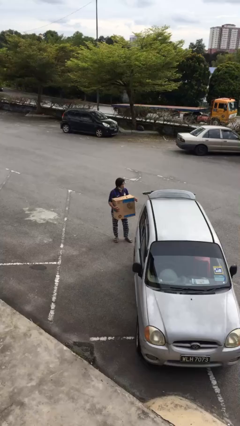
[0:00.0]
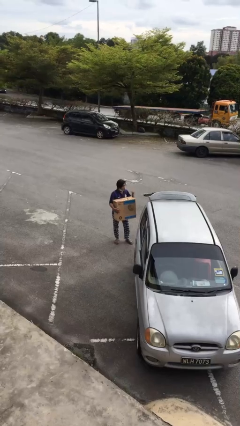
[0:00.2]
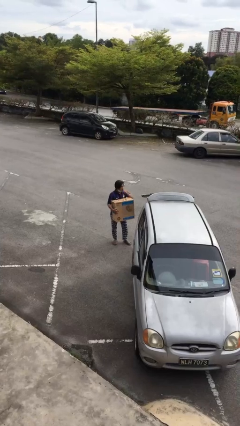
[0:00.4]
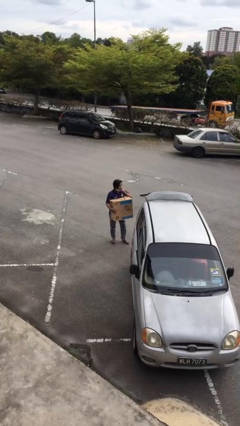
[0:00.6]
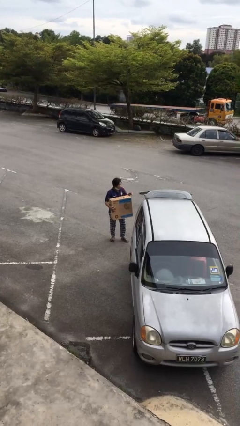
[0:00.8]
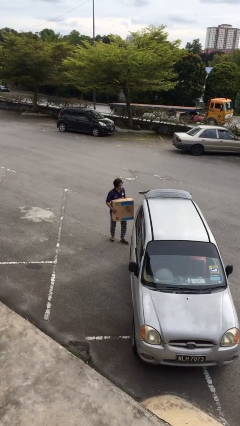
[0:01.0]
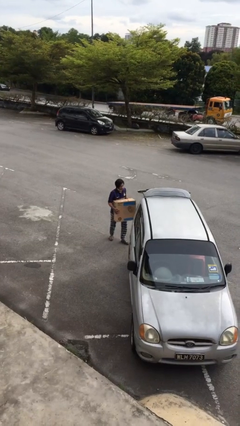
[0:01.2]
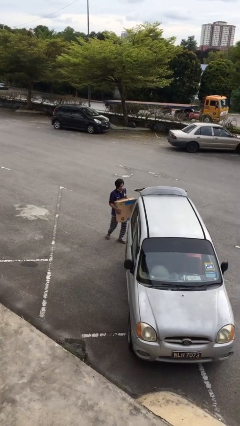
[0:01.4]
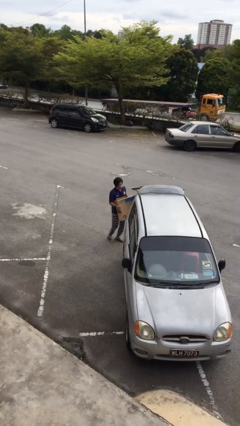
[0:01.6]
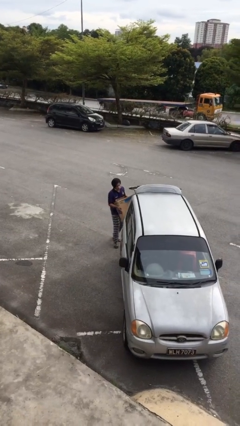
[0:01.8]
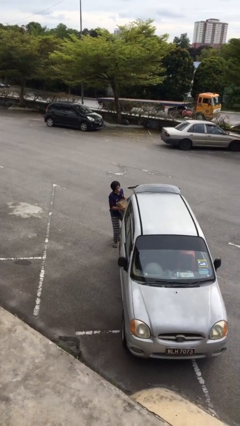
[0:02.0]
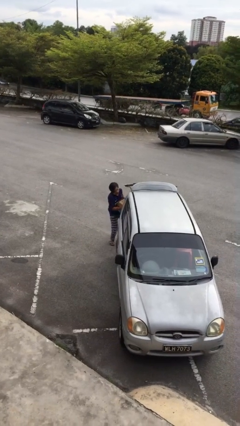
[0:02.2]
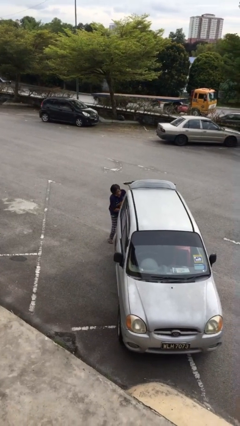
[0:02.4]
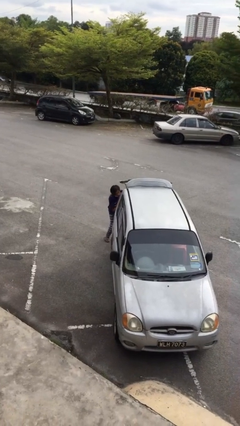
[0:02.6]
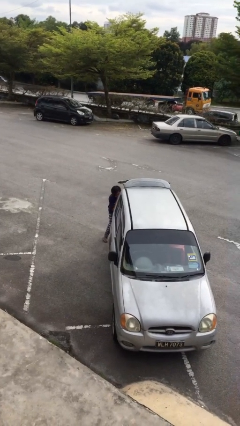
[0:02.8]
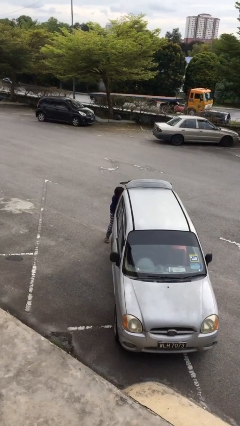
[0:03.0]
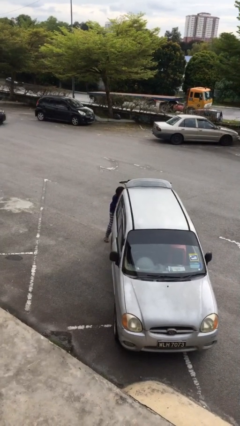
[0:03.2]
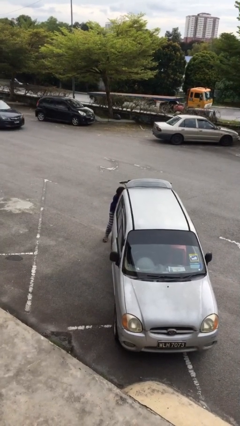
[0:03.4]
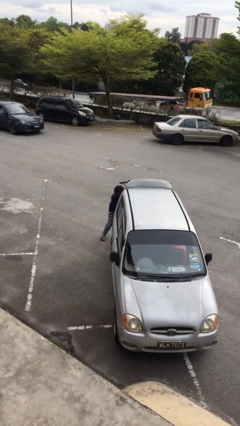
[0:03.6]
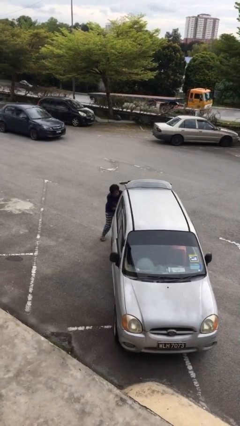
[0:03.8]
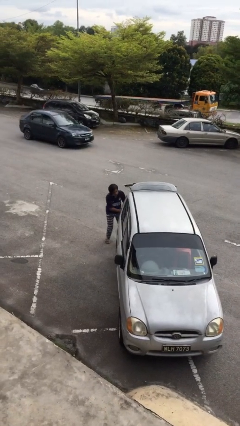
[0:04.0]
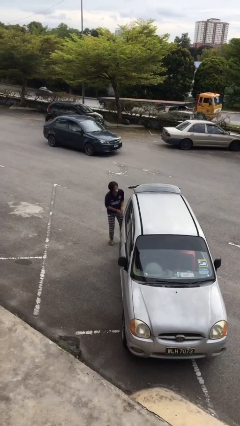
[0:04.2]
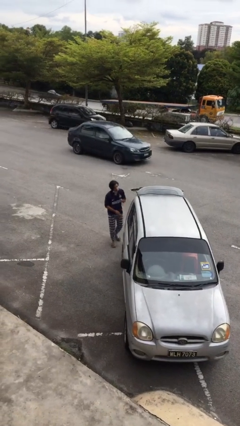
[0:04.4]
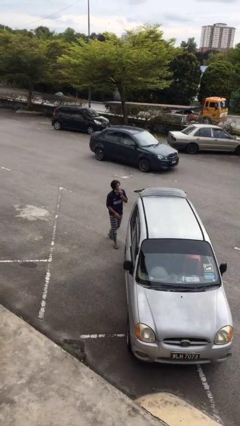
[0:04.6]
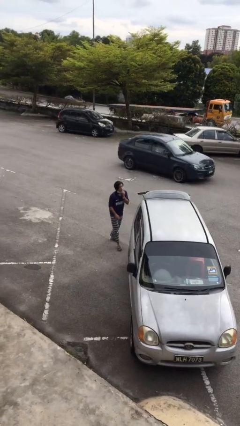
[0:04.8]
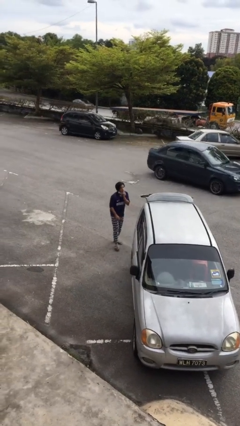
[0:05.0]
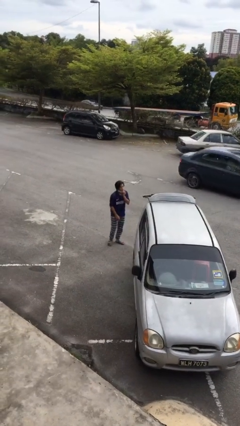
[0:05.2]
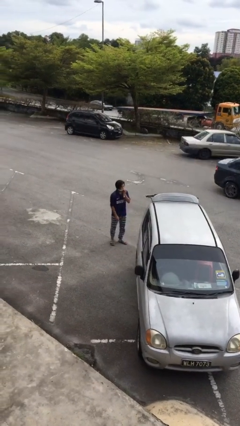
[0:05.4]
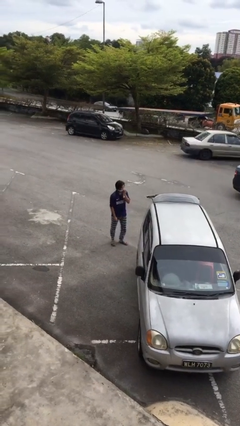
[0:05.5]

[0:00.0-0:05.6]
person loads car

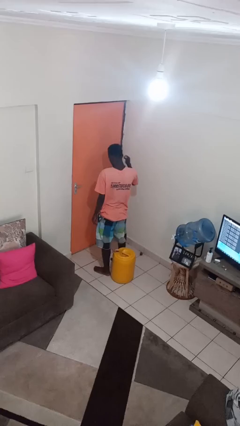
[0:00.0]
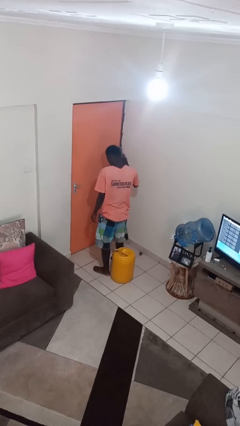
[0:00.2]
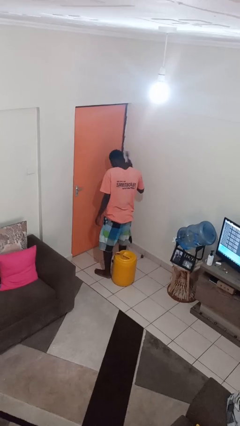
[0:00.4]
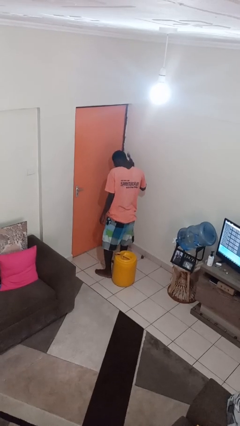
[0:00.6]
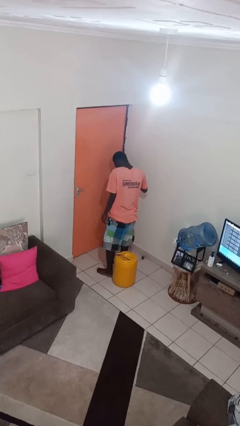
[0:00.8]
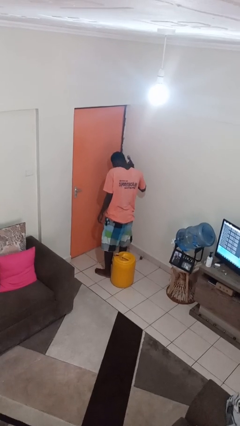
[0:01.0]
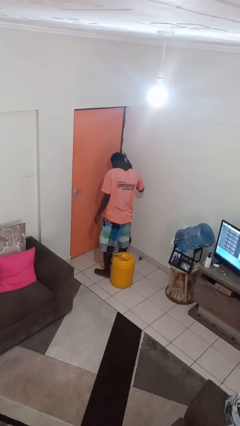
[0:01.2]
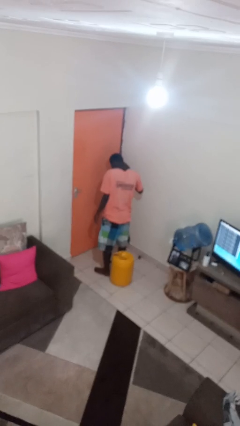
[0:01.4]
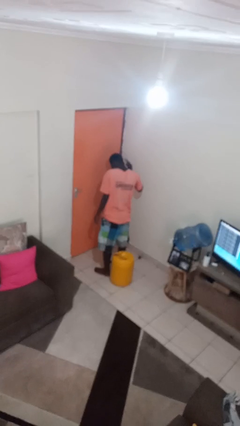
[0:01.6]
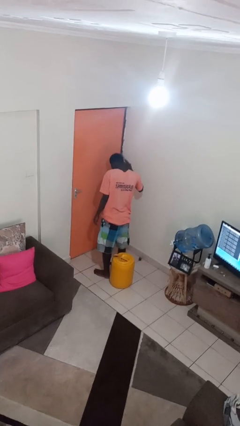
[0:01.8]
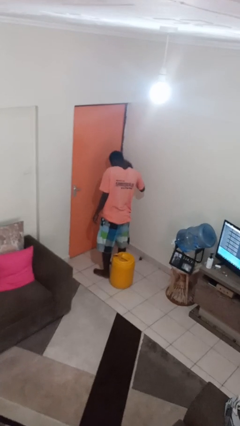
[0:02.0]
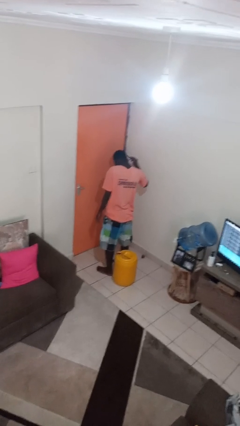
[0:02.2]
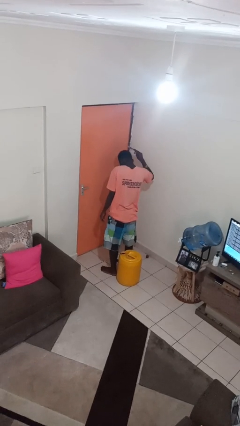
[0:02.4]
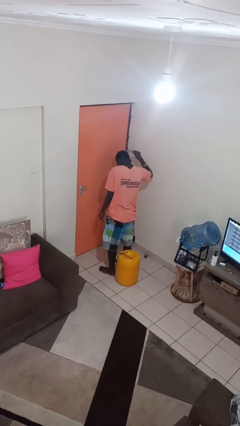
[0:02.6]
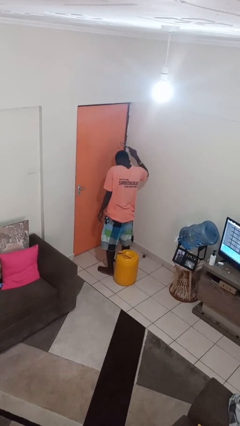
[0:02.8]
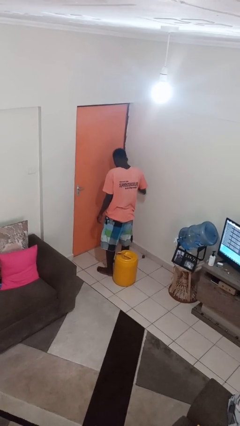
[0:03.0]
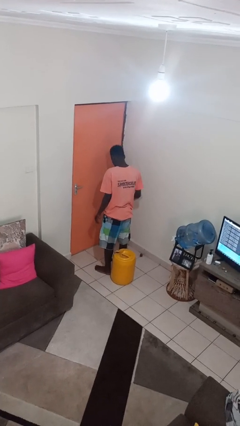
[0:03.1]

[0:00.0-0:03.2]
person brushes hair

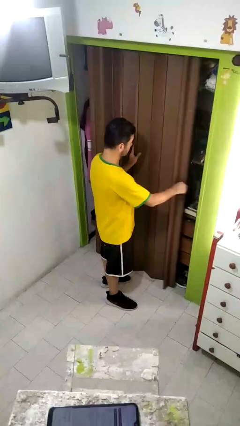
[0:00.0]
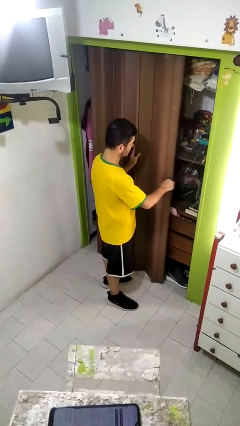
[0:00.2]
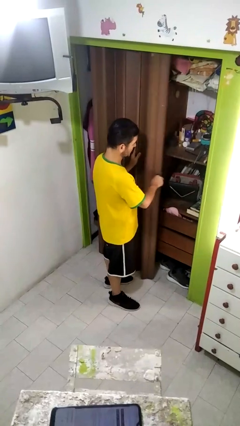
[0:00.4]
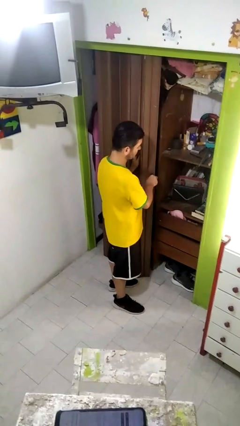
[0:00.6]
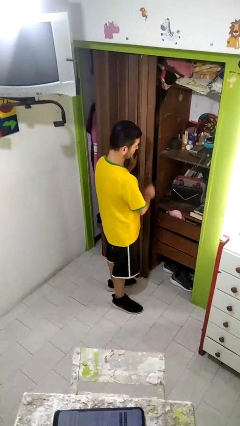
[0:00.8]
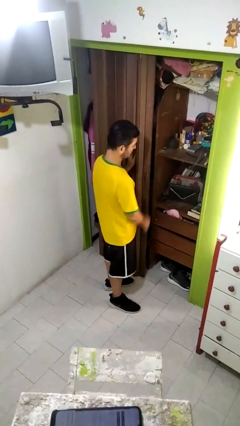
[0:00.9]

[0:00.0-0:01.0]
person opens closet door

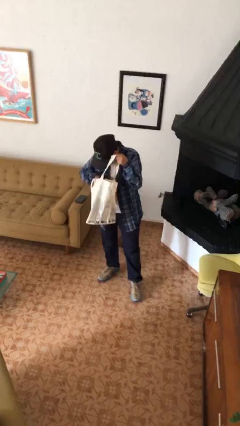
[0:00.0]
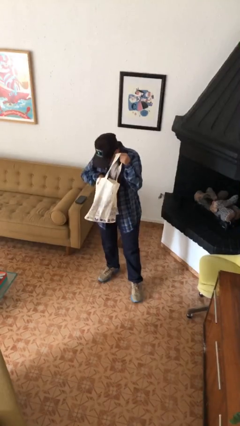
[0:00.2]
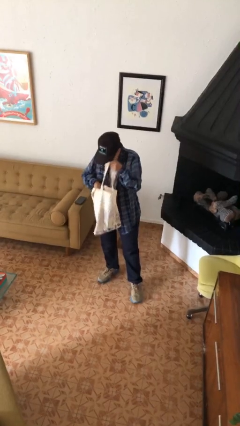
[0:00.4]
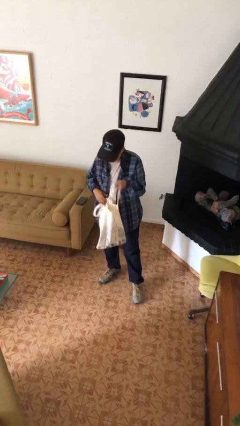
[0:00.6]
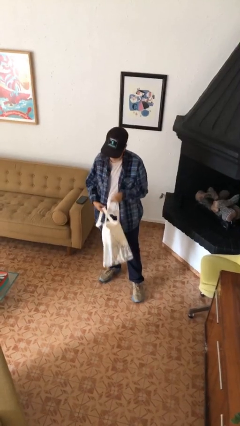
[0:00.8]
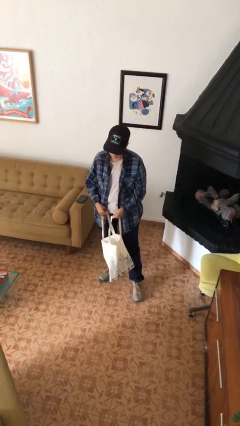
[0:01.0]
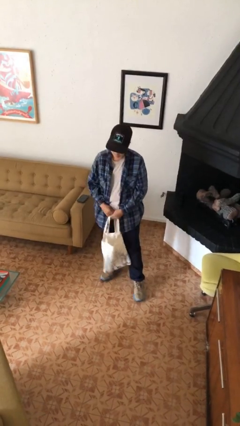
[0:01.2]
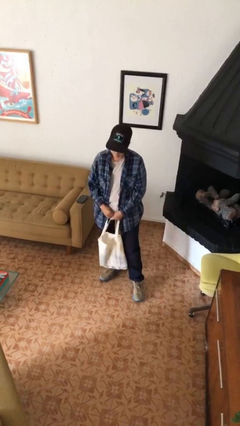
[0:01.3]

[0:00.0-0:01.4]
person searches in bag

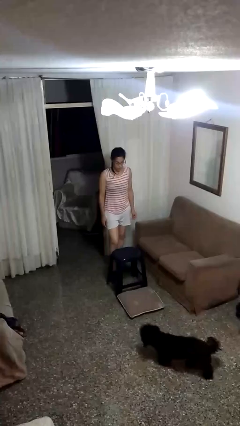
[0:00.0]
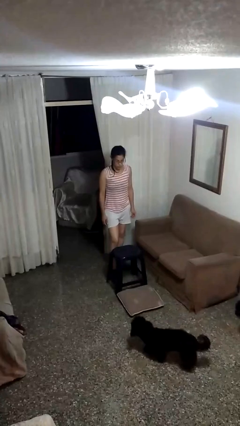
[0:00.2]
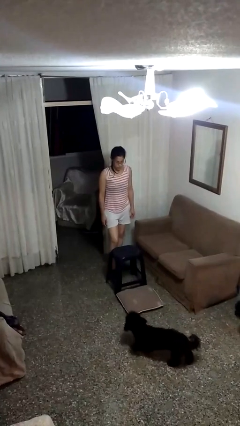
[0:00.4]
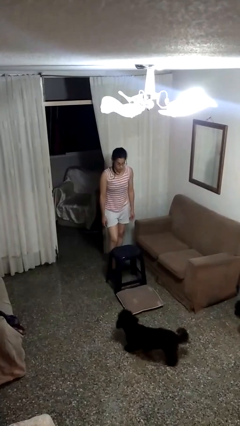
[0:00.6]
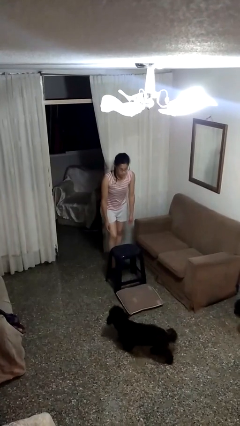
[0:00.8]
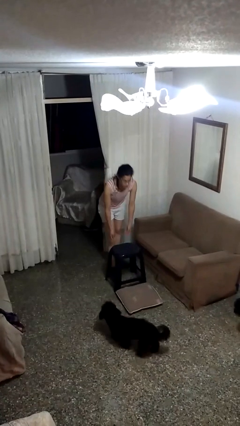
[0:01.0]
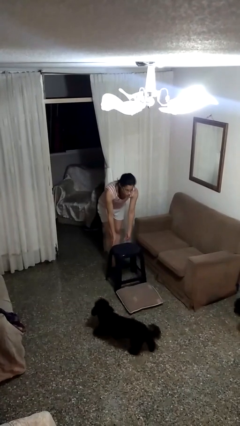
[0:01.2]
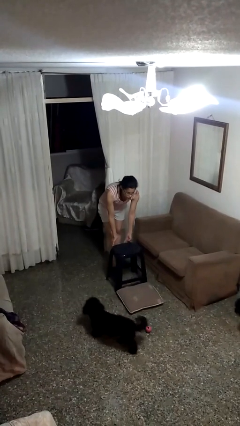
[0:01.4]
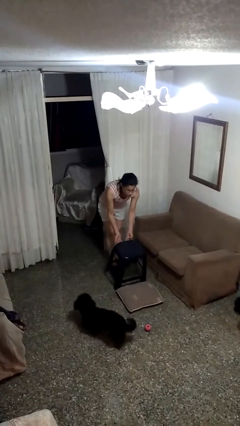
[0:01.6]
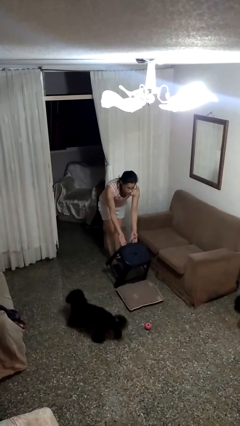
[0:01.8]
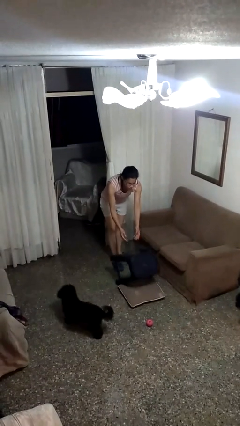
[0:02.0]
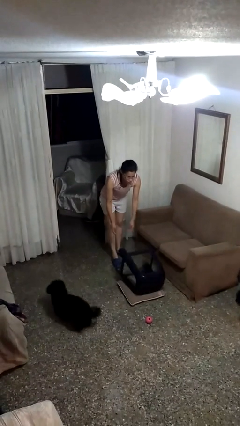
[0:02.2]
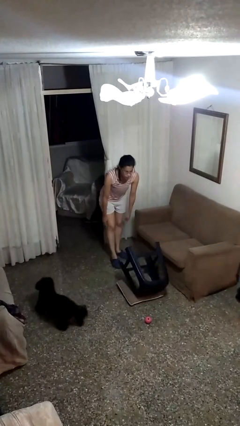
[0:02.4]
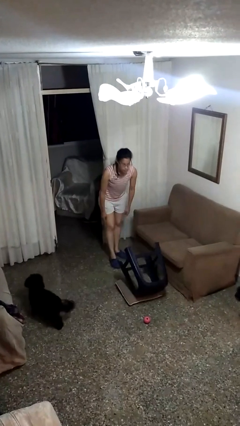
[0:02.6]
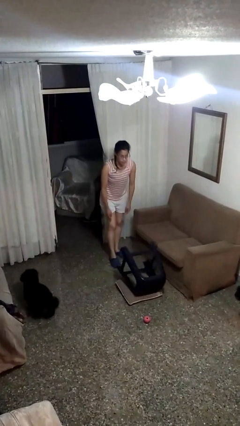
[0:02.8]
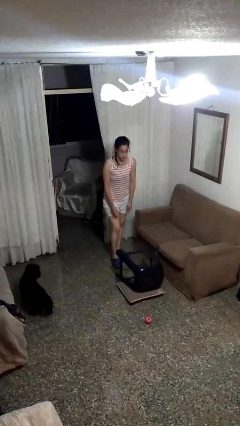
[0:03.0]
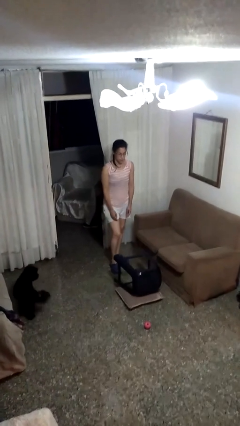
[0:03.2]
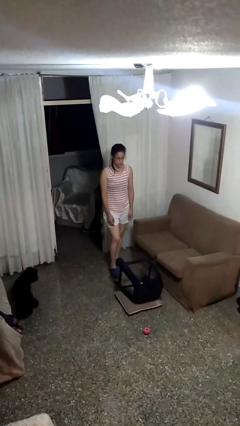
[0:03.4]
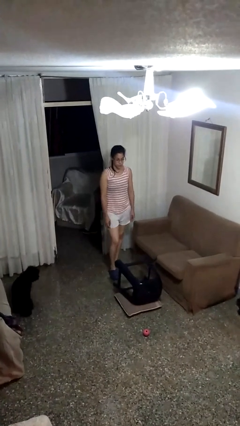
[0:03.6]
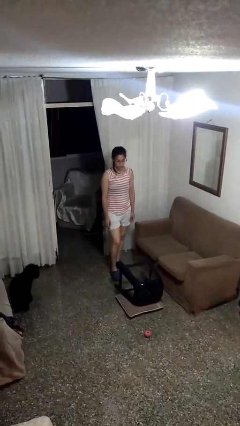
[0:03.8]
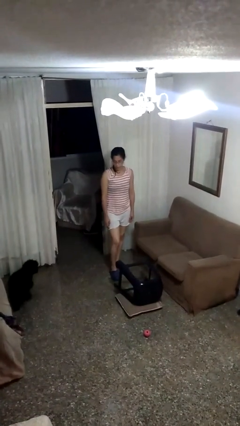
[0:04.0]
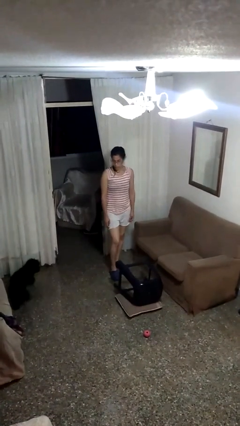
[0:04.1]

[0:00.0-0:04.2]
person knocks over furniture

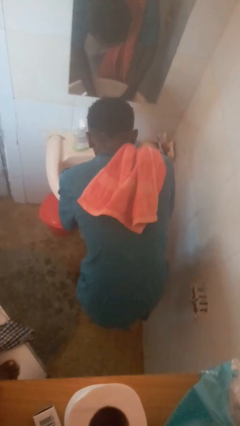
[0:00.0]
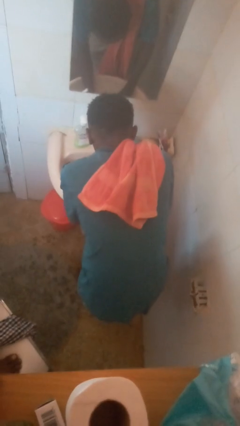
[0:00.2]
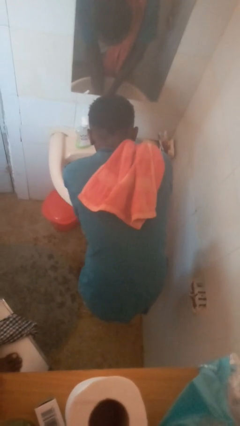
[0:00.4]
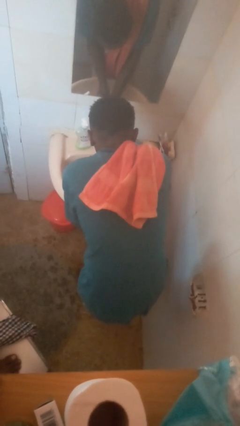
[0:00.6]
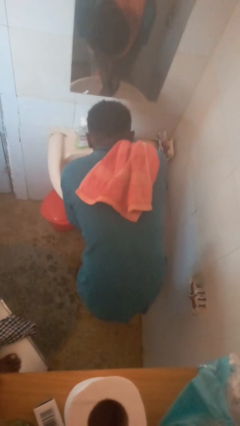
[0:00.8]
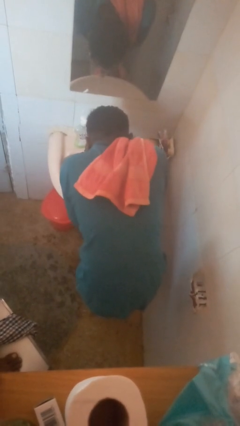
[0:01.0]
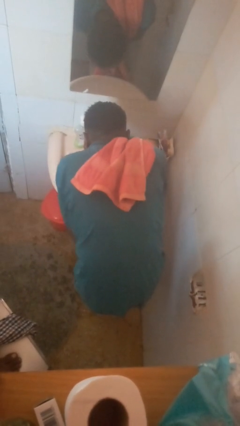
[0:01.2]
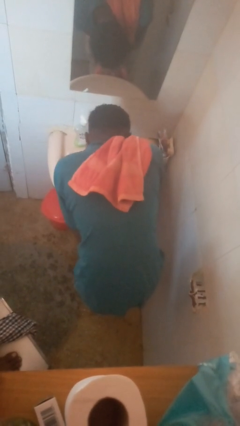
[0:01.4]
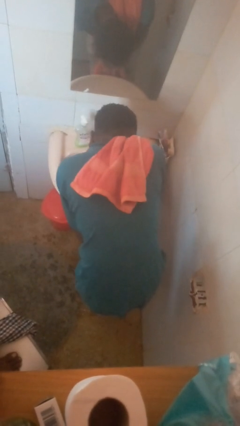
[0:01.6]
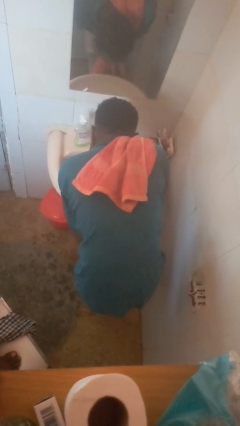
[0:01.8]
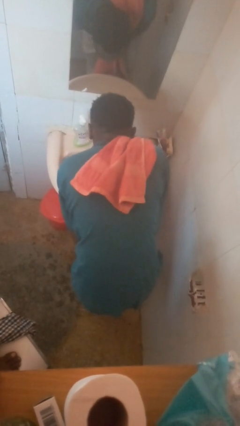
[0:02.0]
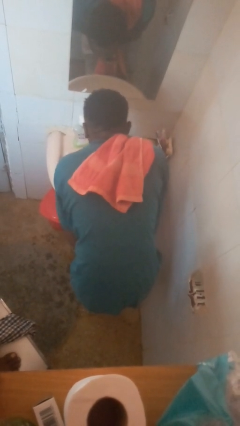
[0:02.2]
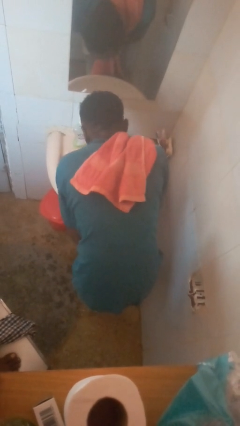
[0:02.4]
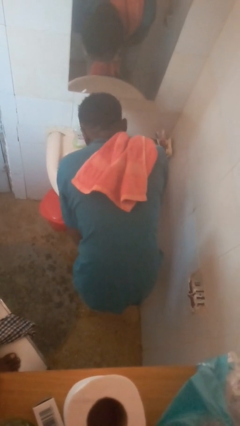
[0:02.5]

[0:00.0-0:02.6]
person washes face
